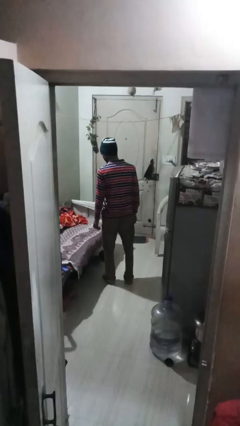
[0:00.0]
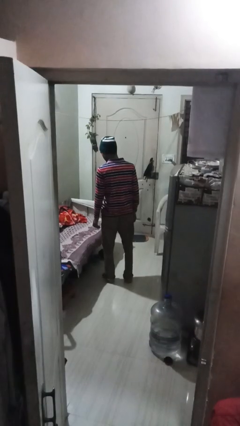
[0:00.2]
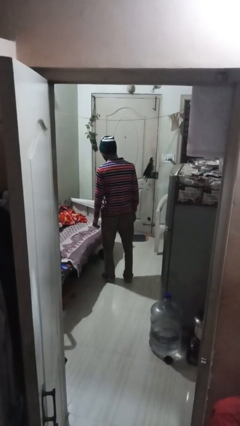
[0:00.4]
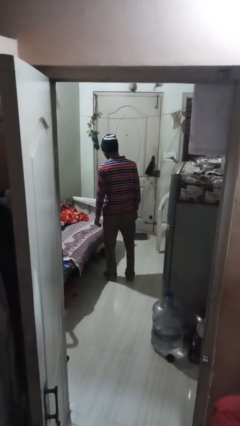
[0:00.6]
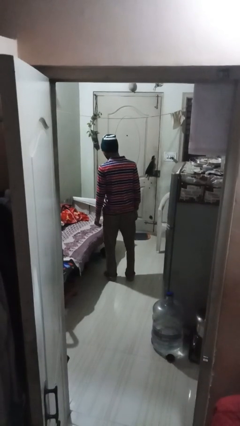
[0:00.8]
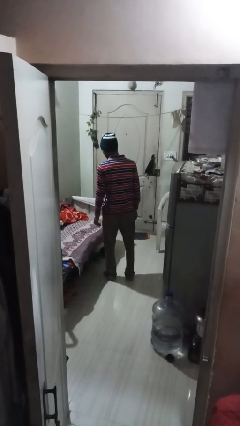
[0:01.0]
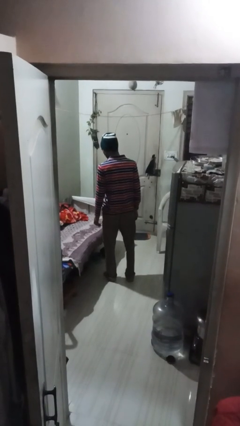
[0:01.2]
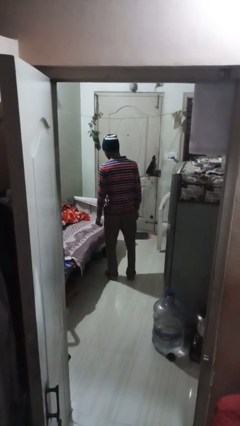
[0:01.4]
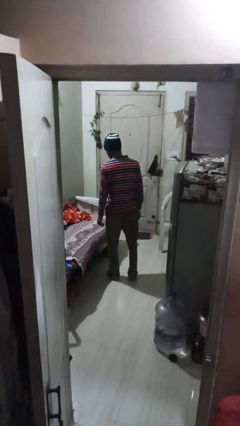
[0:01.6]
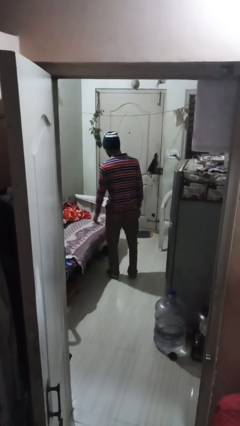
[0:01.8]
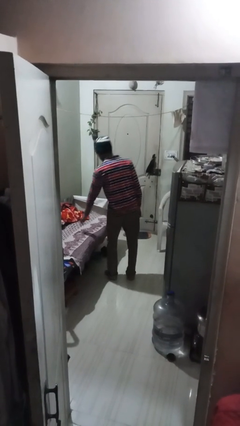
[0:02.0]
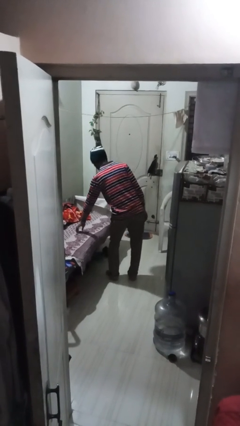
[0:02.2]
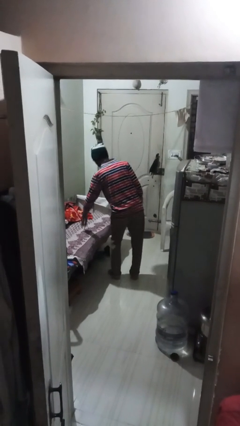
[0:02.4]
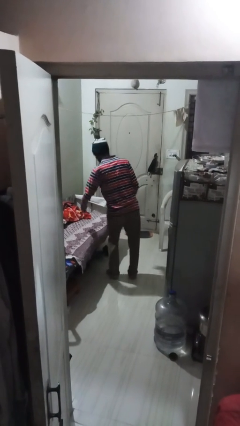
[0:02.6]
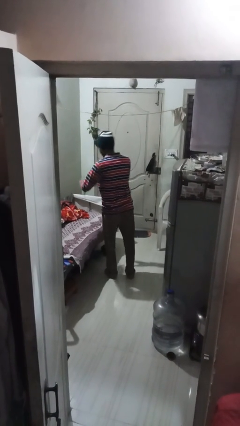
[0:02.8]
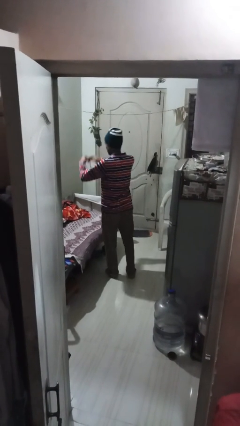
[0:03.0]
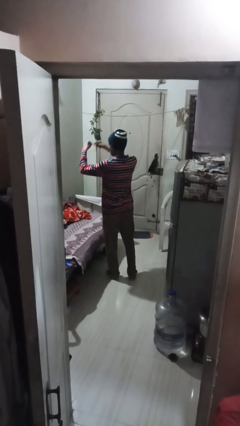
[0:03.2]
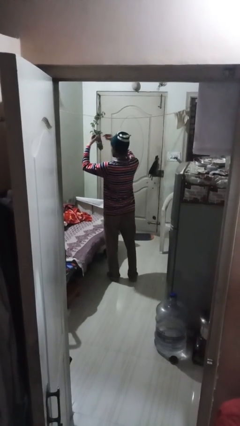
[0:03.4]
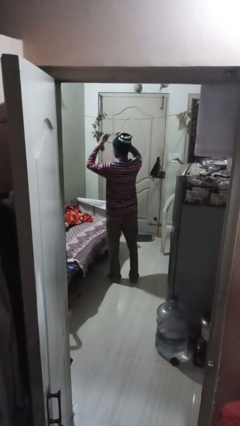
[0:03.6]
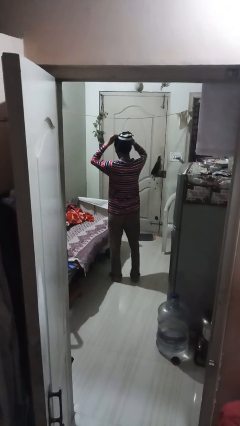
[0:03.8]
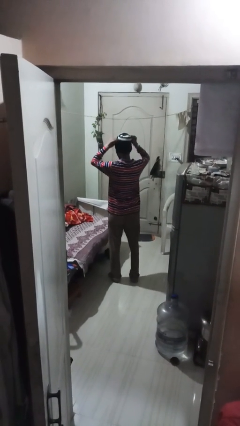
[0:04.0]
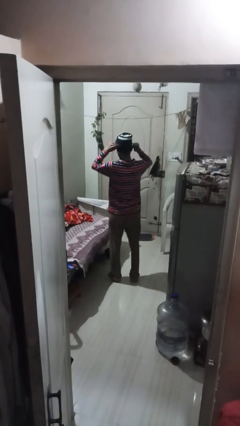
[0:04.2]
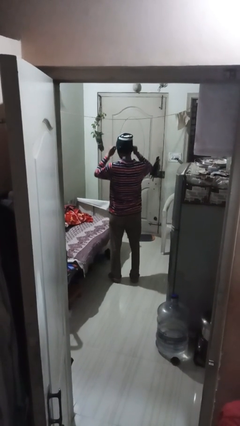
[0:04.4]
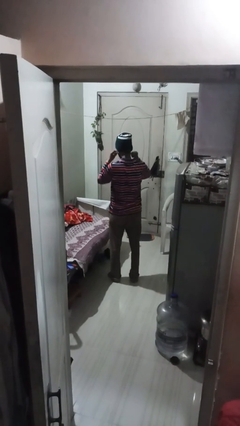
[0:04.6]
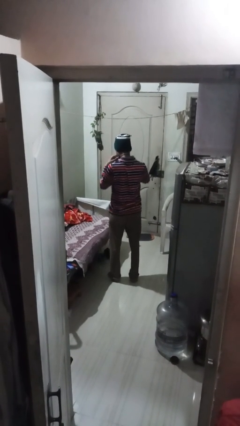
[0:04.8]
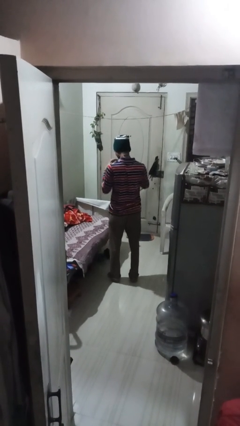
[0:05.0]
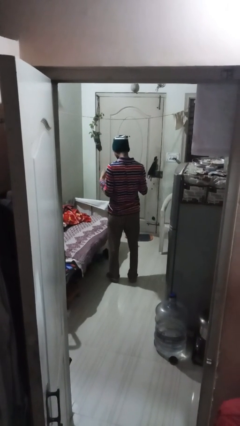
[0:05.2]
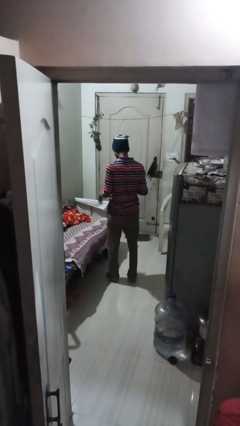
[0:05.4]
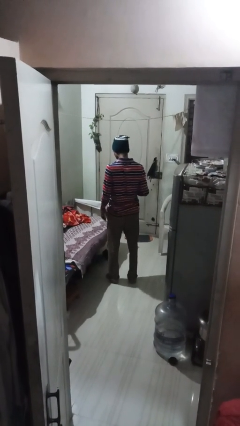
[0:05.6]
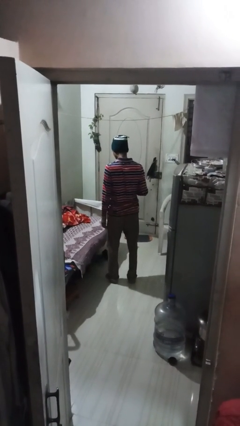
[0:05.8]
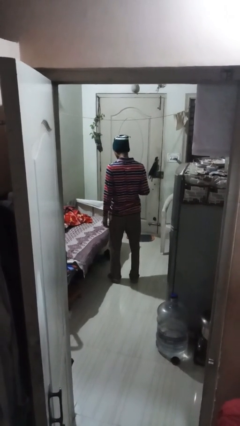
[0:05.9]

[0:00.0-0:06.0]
person puts on necklace

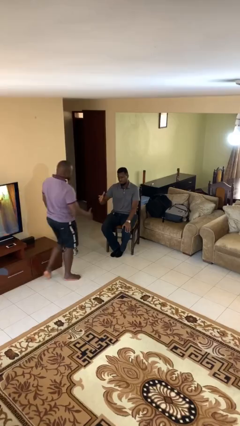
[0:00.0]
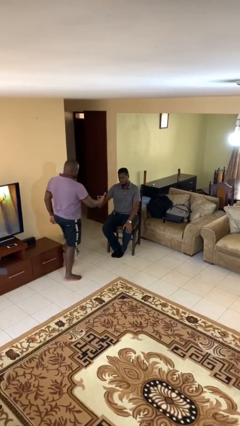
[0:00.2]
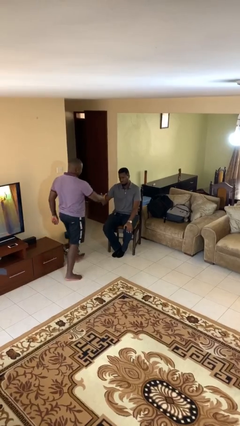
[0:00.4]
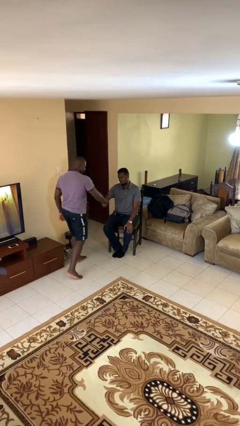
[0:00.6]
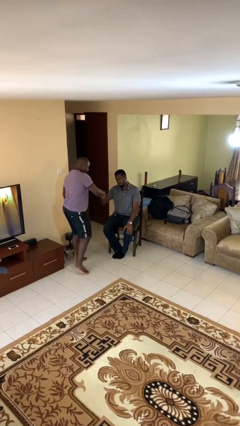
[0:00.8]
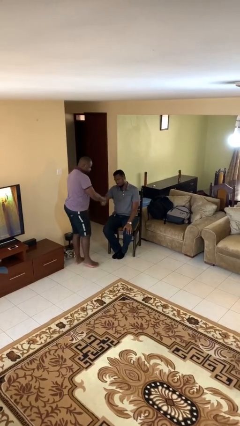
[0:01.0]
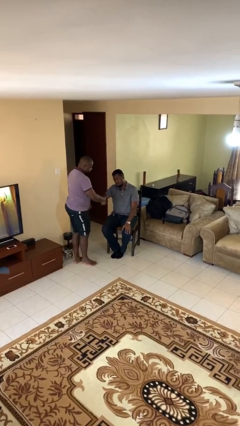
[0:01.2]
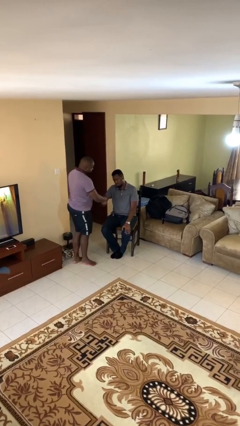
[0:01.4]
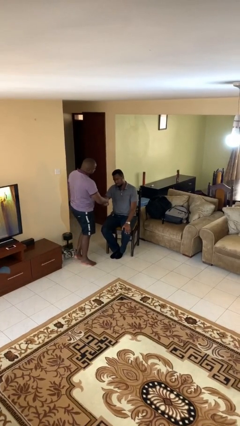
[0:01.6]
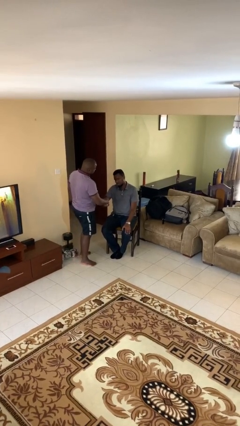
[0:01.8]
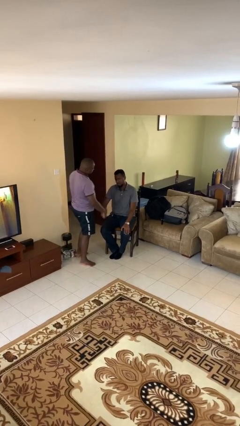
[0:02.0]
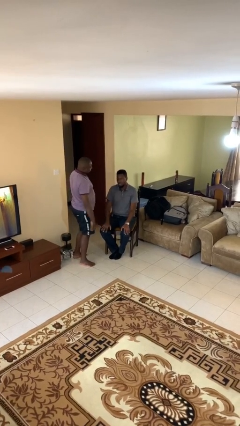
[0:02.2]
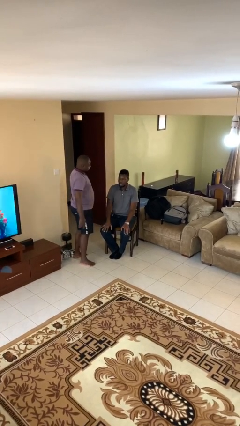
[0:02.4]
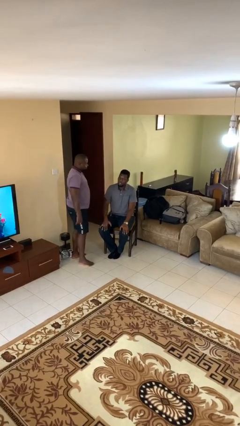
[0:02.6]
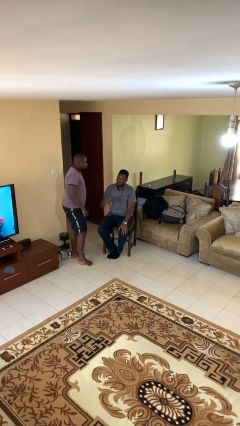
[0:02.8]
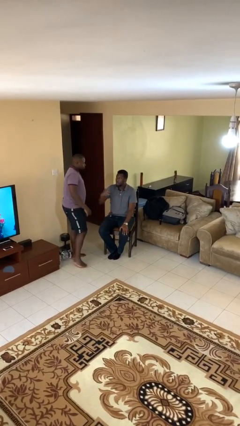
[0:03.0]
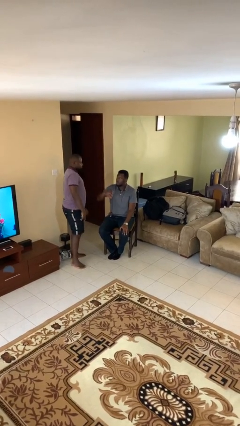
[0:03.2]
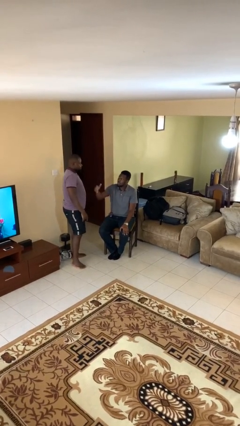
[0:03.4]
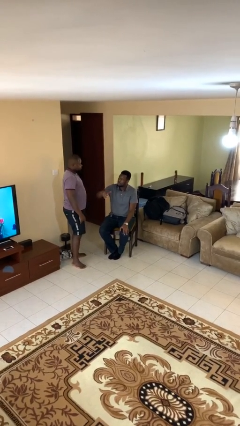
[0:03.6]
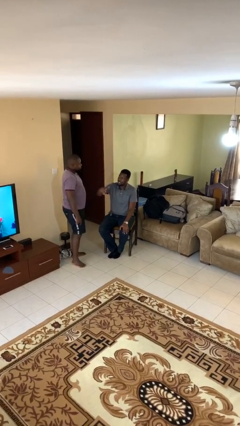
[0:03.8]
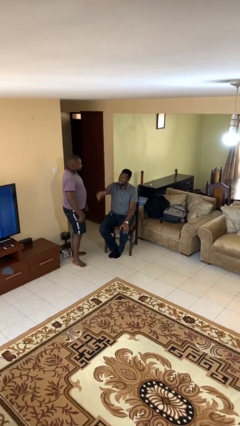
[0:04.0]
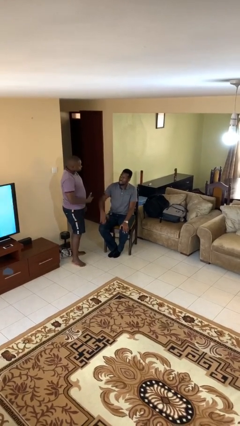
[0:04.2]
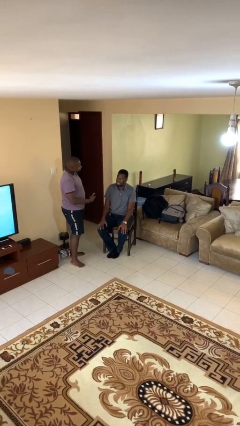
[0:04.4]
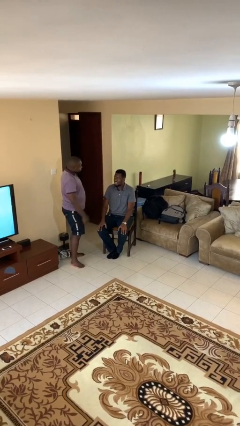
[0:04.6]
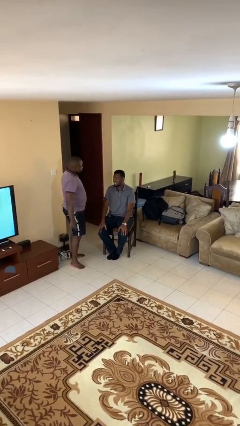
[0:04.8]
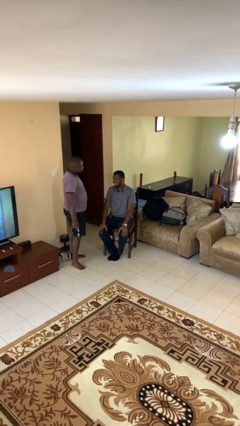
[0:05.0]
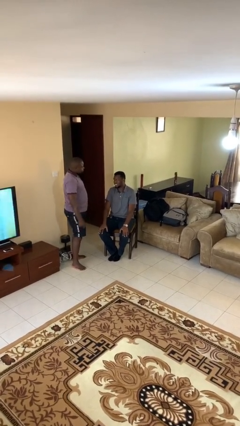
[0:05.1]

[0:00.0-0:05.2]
person shakes hand

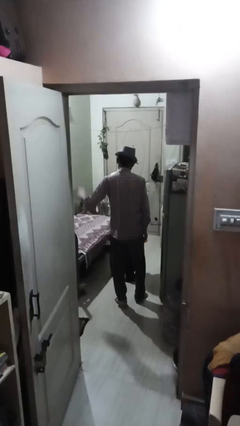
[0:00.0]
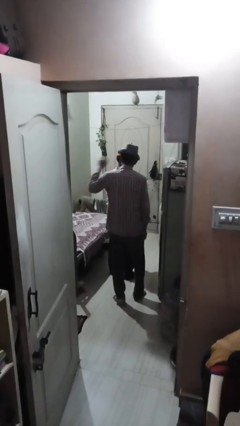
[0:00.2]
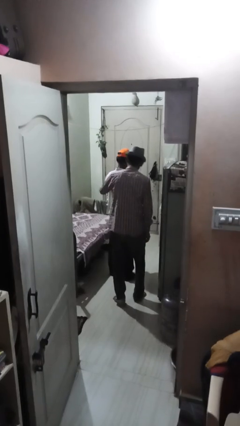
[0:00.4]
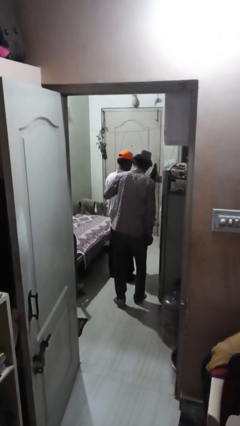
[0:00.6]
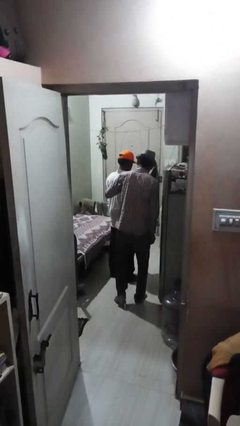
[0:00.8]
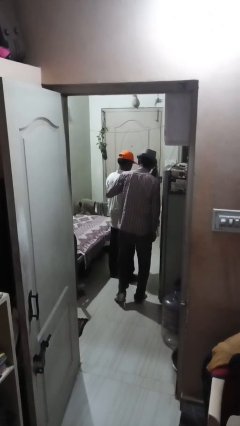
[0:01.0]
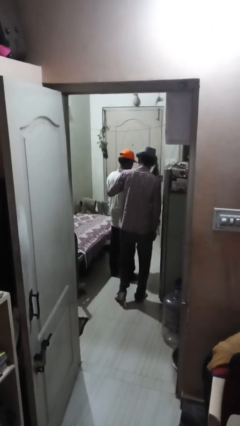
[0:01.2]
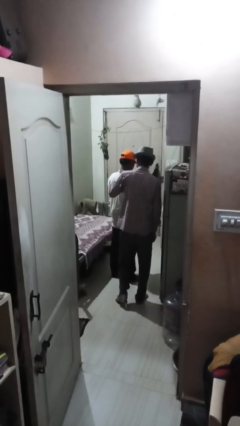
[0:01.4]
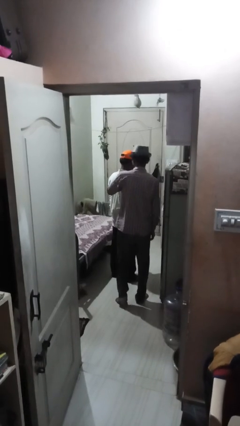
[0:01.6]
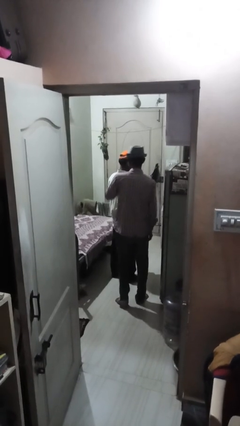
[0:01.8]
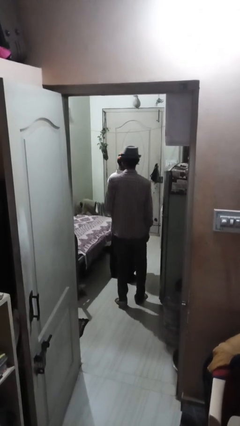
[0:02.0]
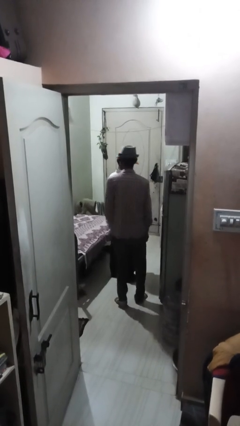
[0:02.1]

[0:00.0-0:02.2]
person touches back of person

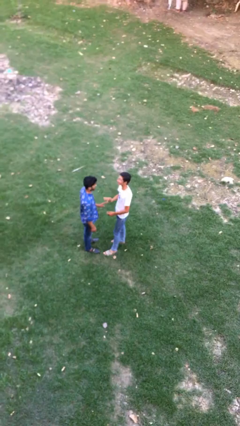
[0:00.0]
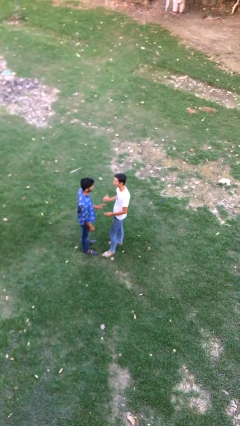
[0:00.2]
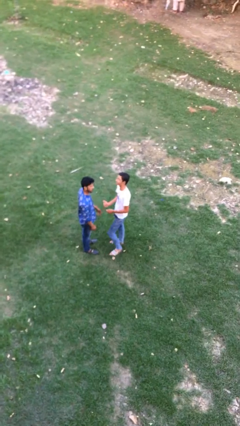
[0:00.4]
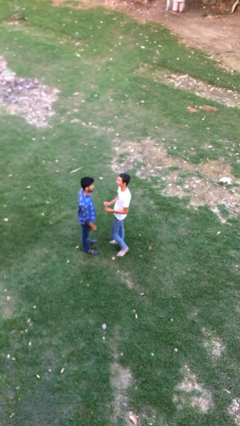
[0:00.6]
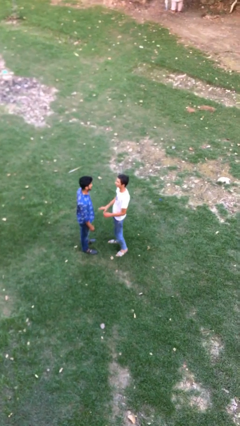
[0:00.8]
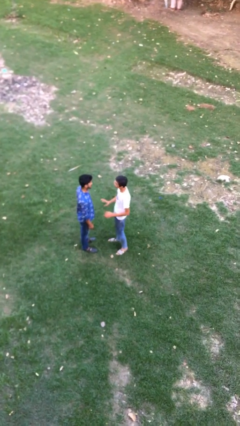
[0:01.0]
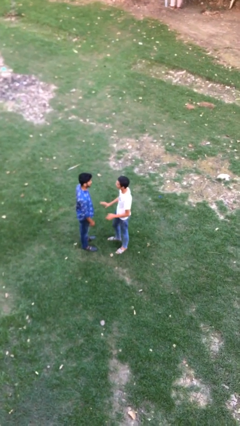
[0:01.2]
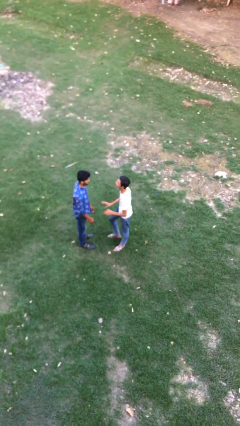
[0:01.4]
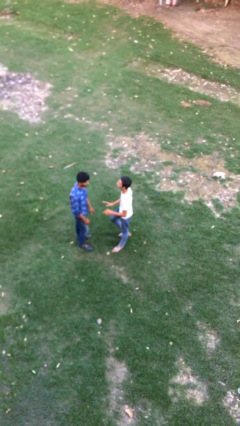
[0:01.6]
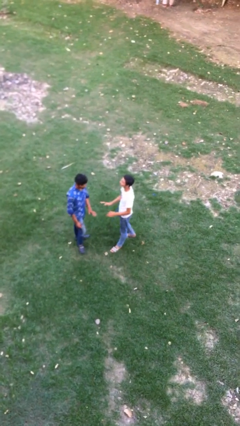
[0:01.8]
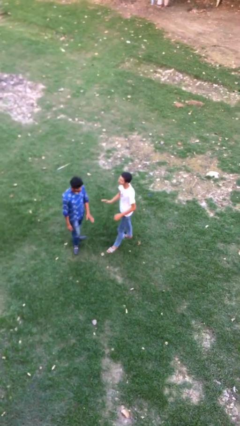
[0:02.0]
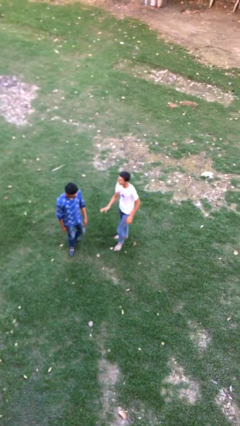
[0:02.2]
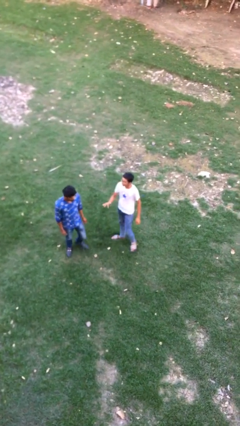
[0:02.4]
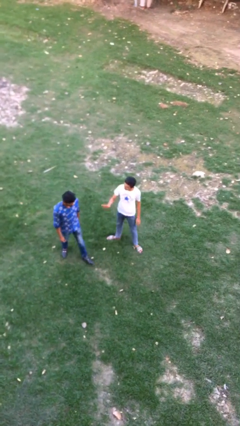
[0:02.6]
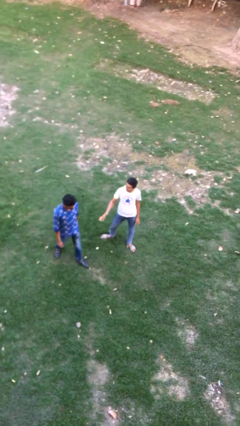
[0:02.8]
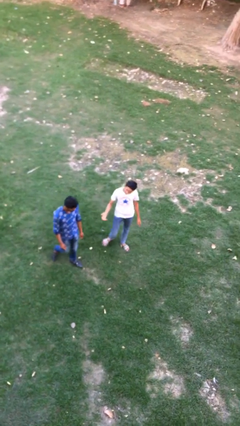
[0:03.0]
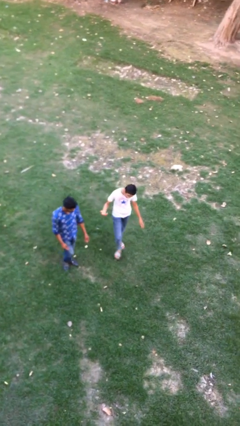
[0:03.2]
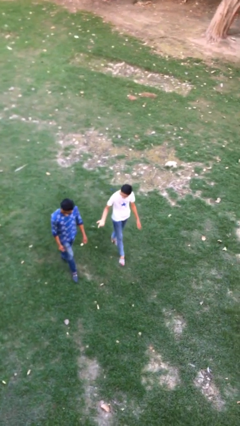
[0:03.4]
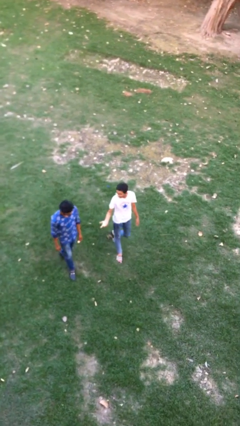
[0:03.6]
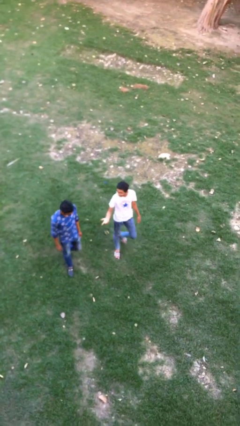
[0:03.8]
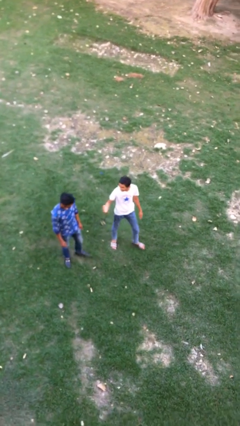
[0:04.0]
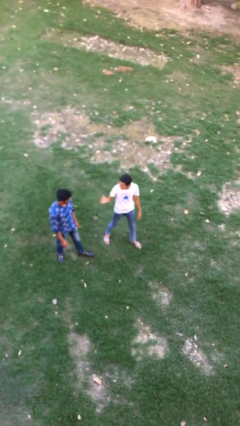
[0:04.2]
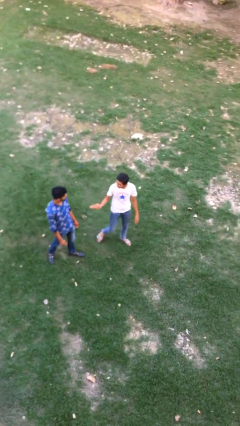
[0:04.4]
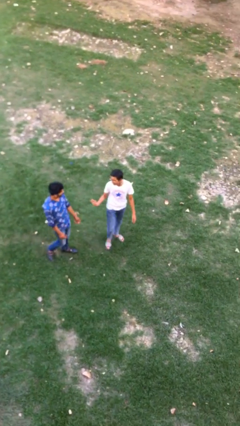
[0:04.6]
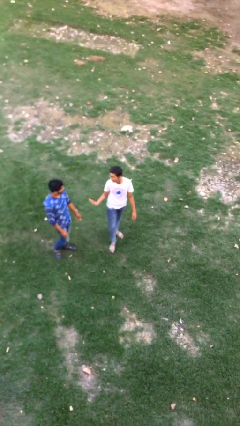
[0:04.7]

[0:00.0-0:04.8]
person talks to person
